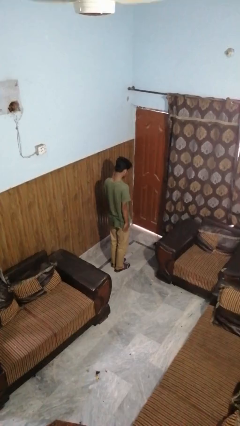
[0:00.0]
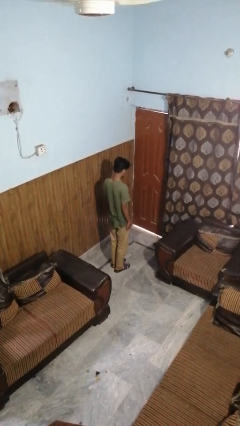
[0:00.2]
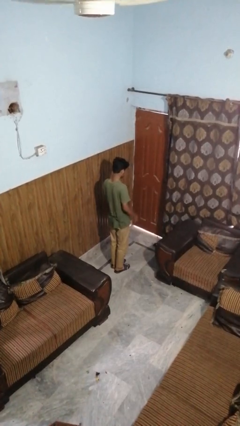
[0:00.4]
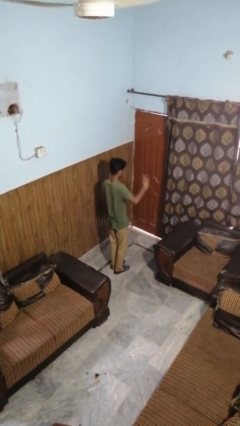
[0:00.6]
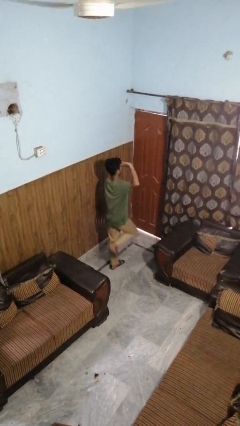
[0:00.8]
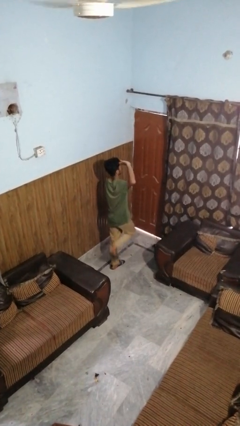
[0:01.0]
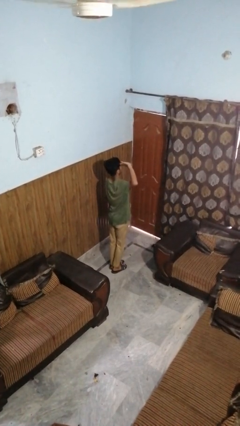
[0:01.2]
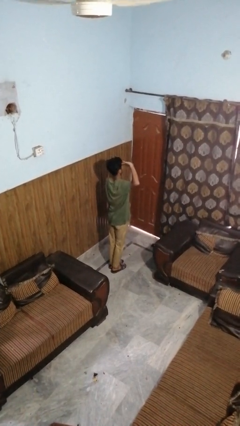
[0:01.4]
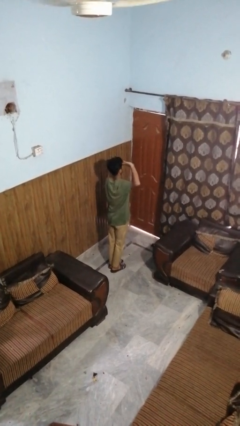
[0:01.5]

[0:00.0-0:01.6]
person salutes

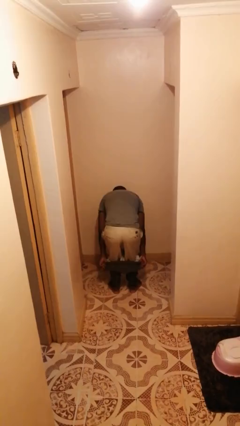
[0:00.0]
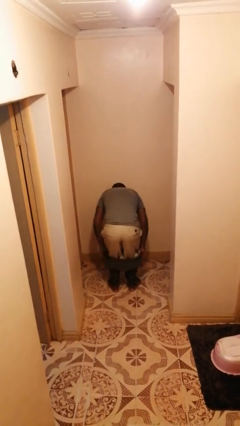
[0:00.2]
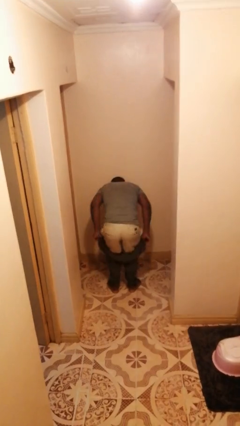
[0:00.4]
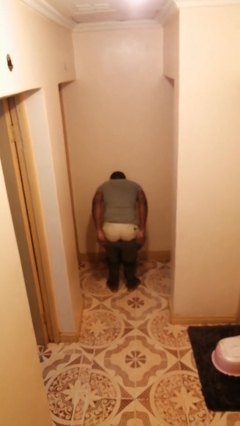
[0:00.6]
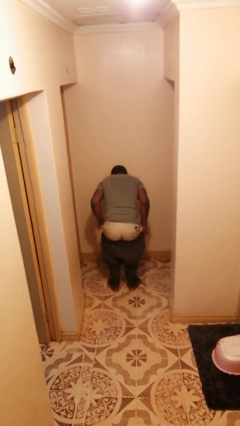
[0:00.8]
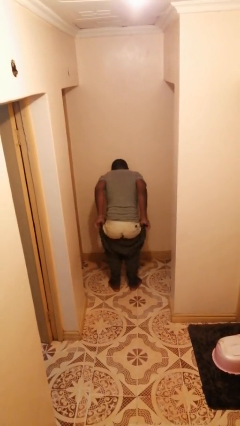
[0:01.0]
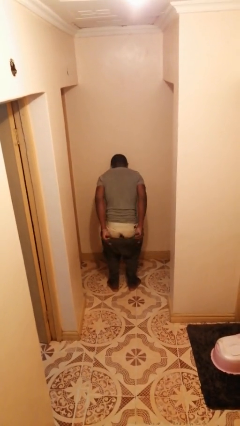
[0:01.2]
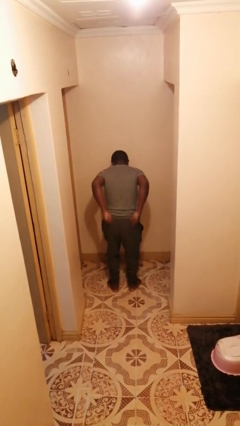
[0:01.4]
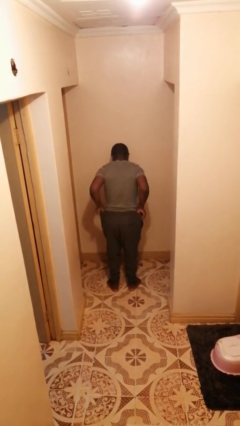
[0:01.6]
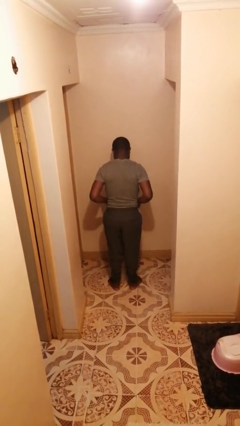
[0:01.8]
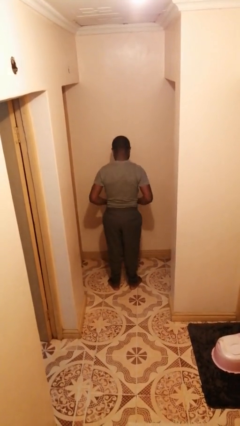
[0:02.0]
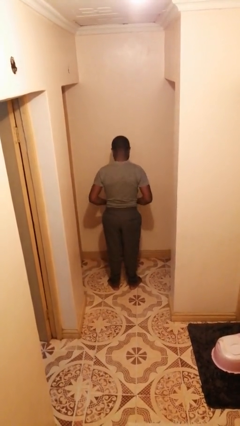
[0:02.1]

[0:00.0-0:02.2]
person puts on pants

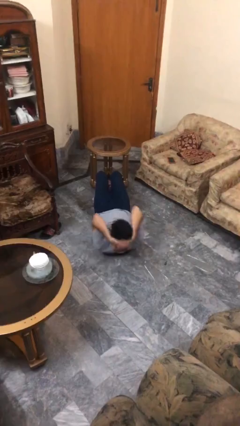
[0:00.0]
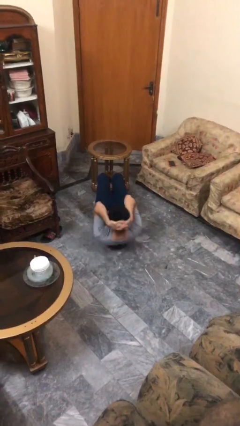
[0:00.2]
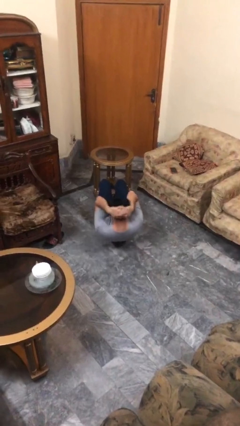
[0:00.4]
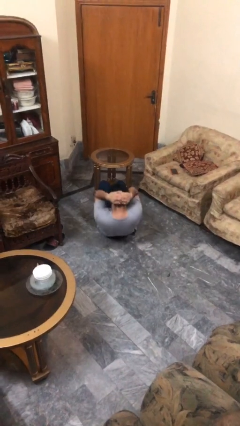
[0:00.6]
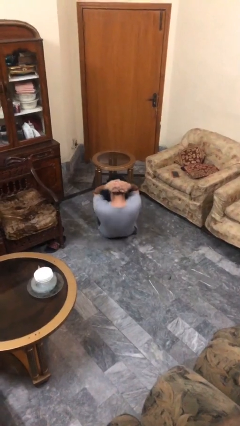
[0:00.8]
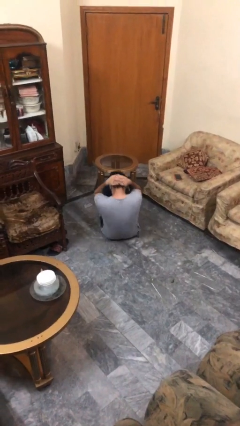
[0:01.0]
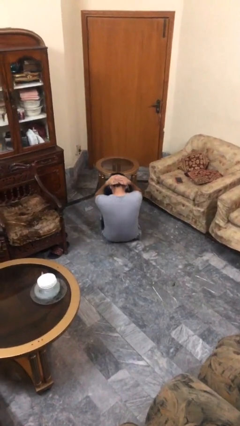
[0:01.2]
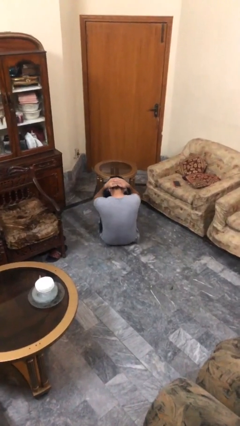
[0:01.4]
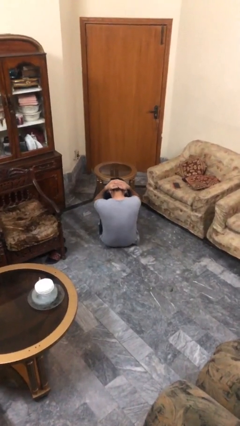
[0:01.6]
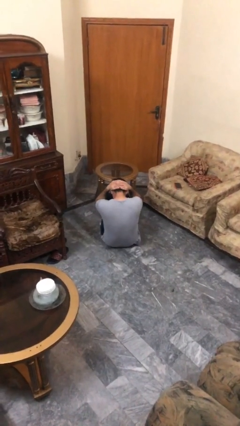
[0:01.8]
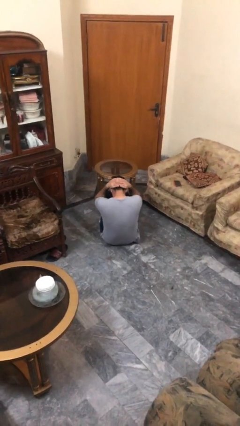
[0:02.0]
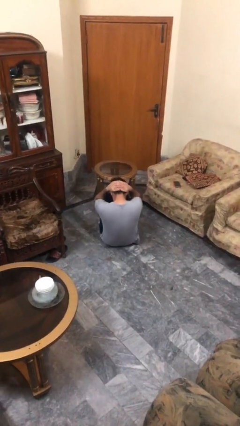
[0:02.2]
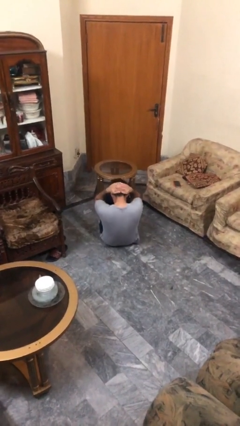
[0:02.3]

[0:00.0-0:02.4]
person exercises with situp

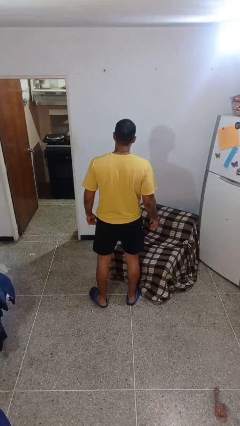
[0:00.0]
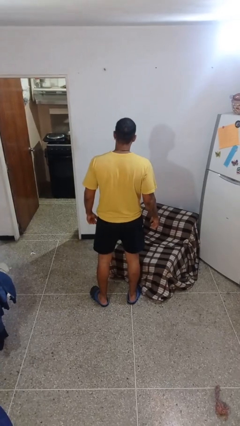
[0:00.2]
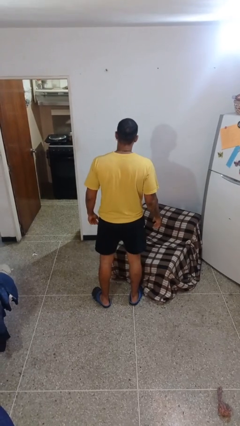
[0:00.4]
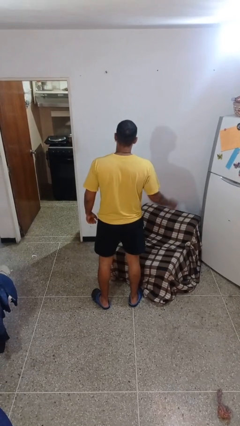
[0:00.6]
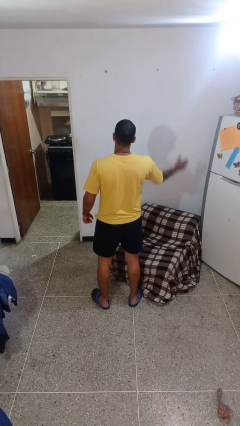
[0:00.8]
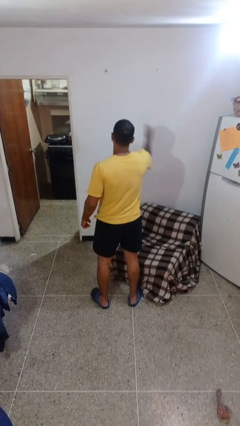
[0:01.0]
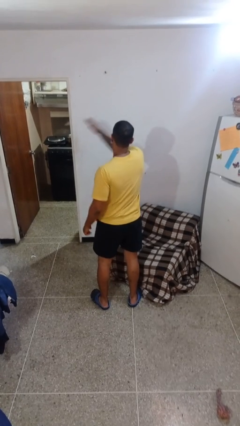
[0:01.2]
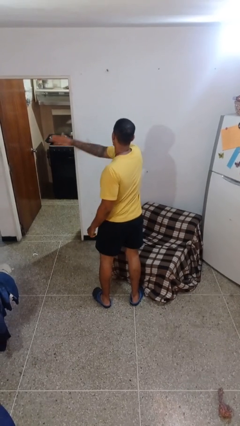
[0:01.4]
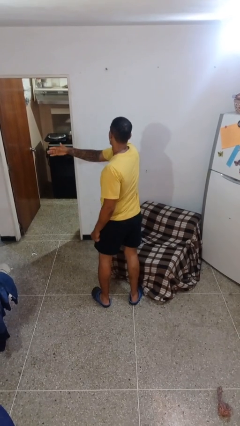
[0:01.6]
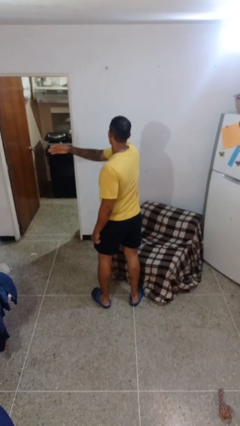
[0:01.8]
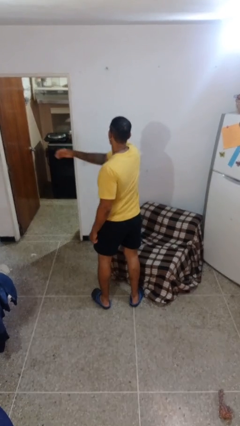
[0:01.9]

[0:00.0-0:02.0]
person gestures swipe left

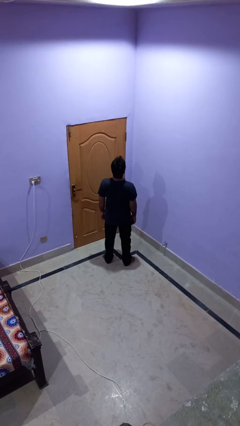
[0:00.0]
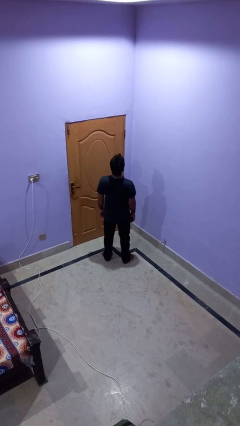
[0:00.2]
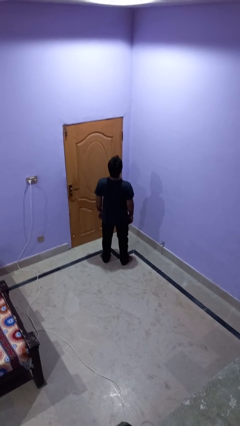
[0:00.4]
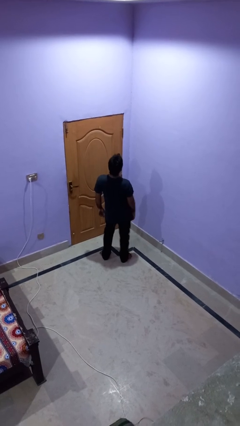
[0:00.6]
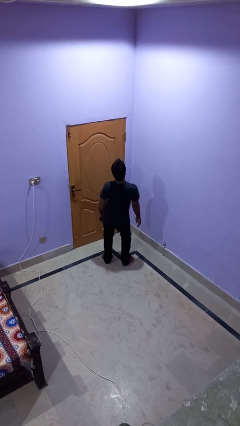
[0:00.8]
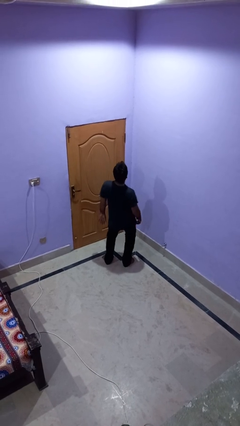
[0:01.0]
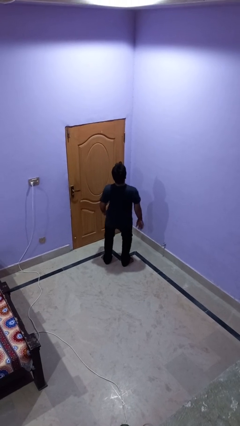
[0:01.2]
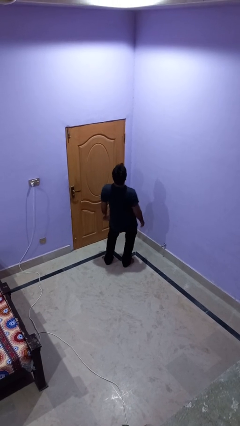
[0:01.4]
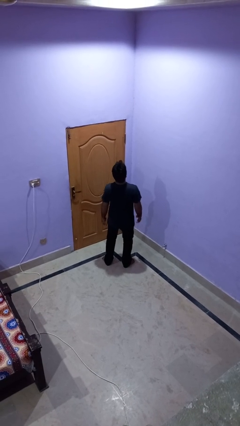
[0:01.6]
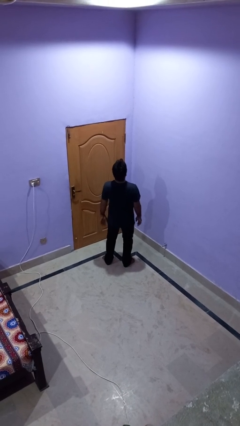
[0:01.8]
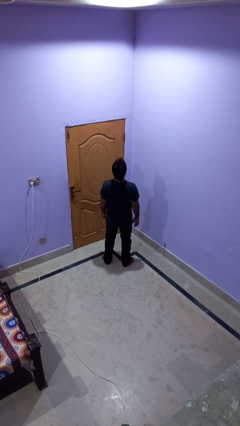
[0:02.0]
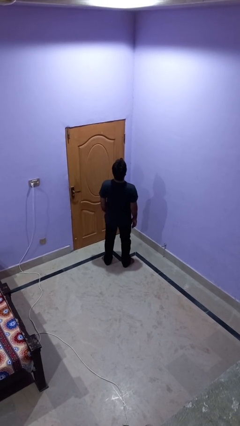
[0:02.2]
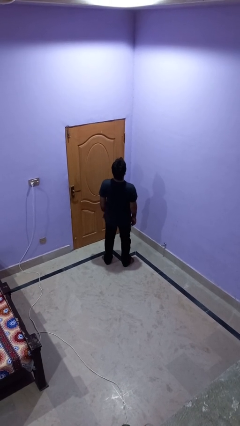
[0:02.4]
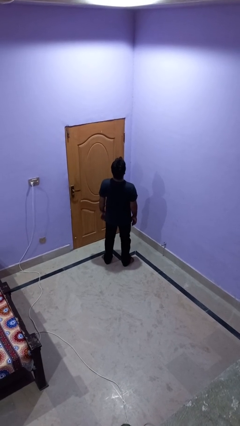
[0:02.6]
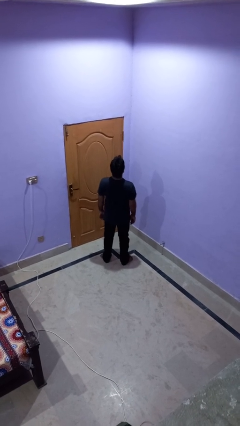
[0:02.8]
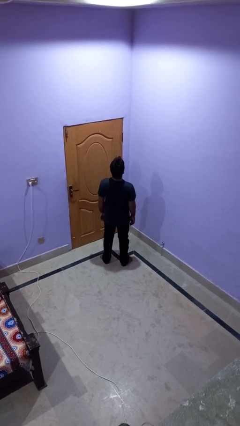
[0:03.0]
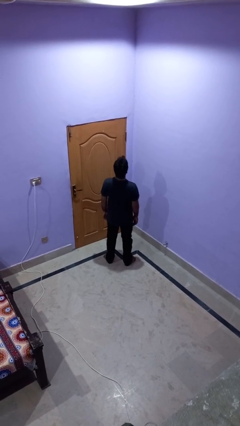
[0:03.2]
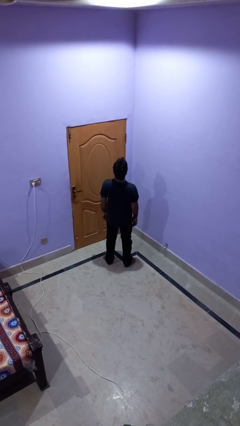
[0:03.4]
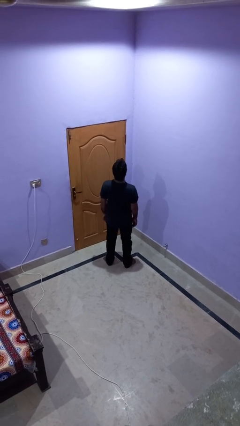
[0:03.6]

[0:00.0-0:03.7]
person wiggles hips

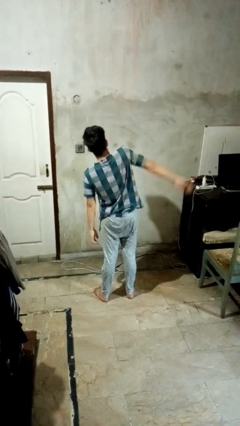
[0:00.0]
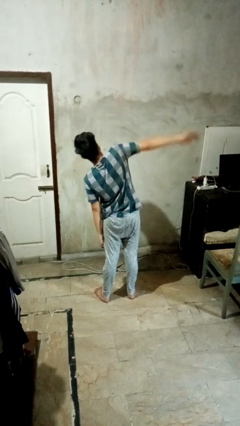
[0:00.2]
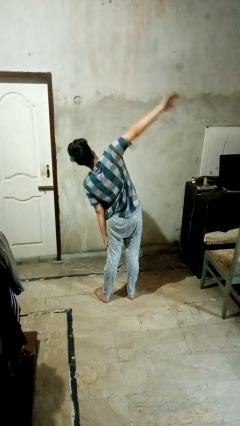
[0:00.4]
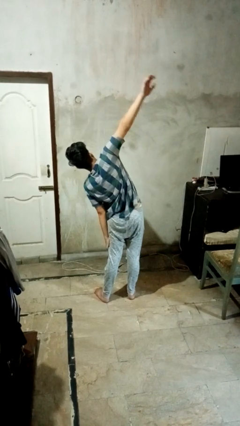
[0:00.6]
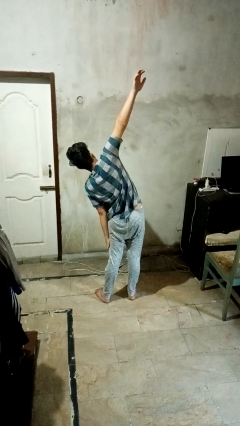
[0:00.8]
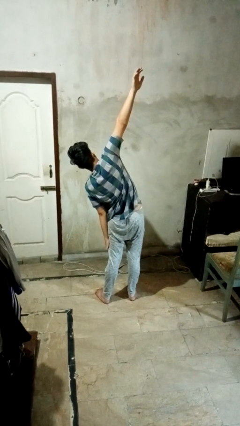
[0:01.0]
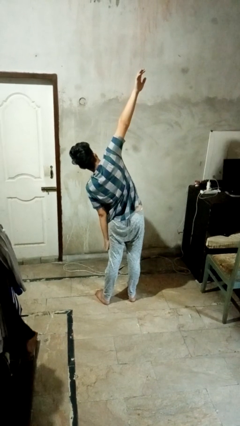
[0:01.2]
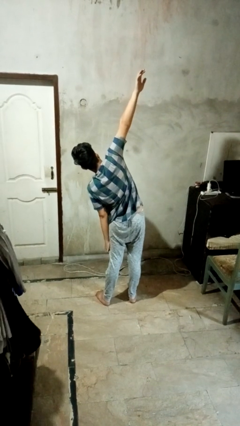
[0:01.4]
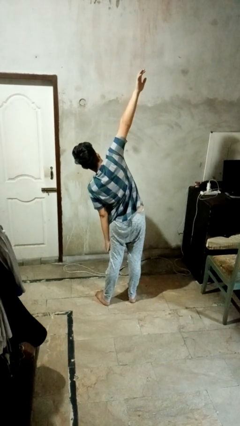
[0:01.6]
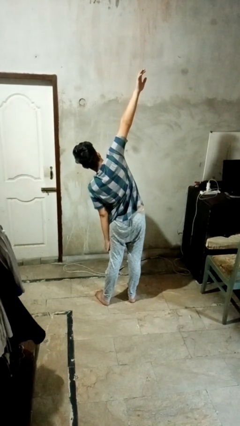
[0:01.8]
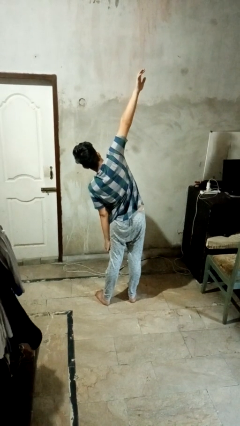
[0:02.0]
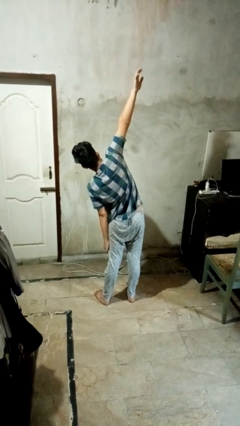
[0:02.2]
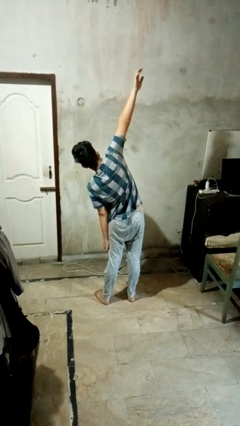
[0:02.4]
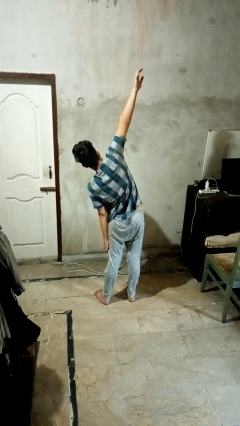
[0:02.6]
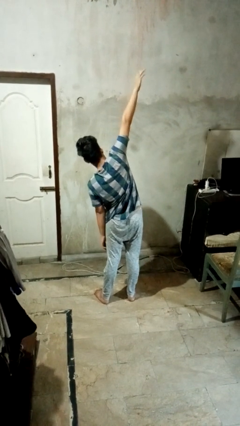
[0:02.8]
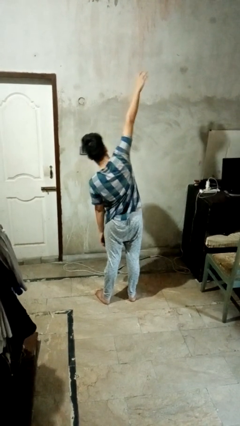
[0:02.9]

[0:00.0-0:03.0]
person stretches arms to side

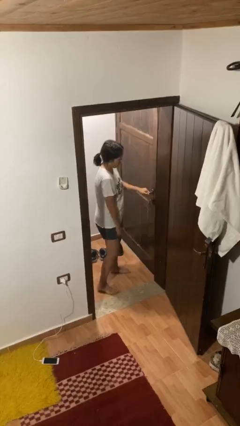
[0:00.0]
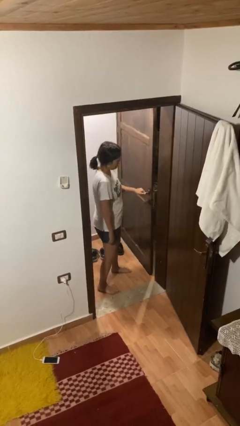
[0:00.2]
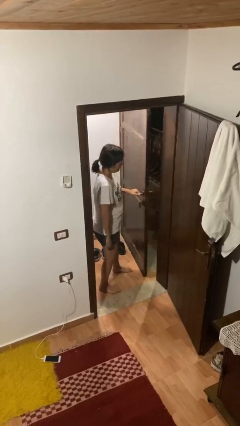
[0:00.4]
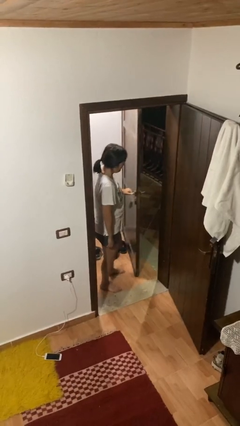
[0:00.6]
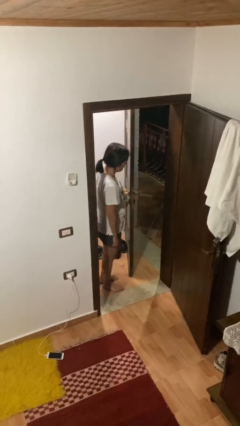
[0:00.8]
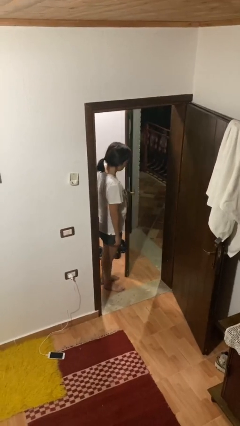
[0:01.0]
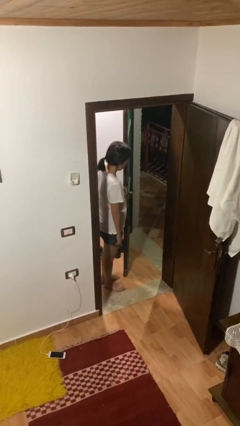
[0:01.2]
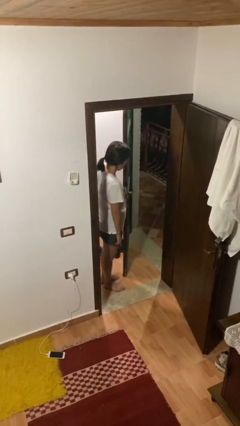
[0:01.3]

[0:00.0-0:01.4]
person opens facility door

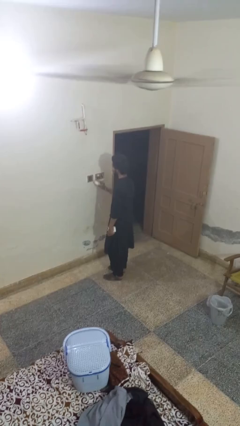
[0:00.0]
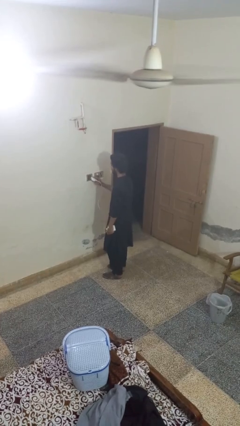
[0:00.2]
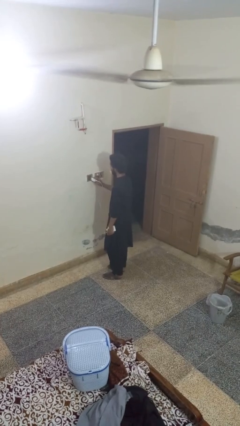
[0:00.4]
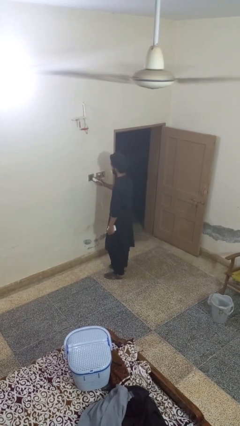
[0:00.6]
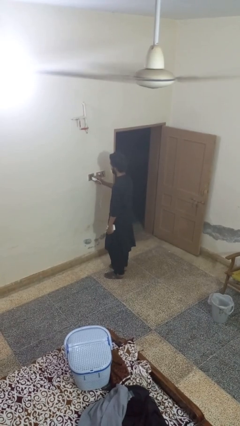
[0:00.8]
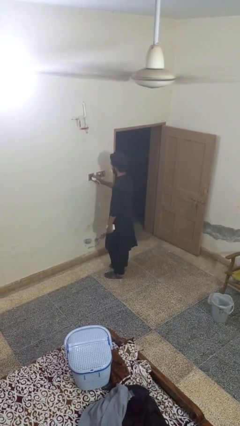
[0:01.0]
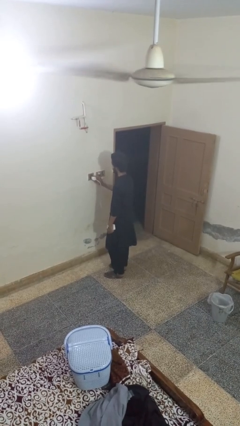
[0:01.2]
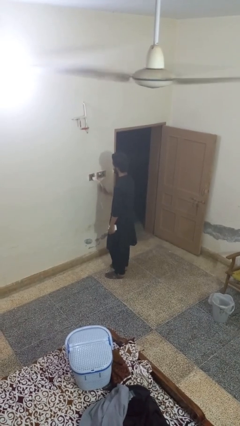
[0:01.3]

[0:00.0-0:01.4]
person plugs into electrical socket
